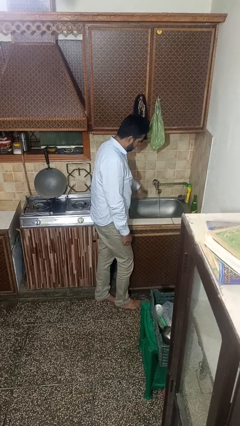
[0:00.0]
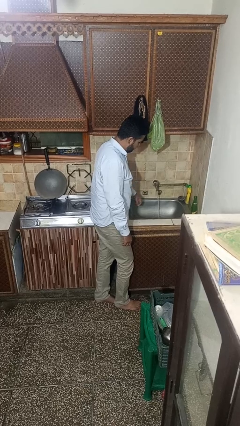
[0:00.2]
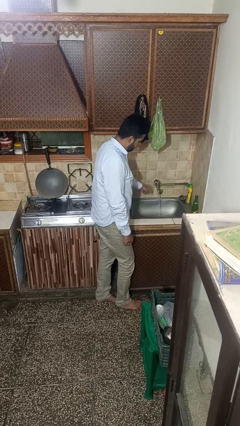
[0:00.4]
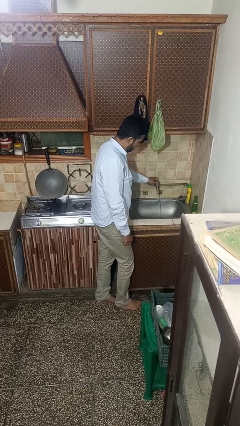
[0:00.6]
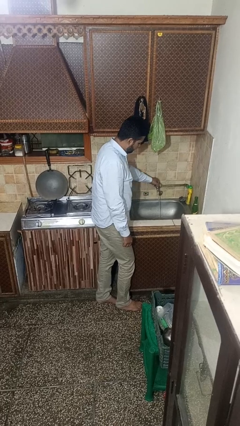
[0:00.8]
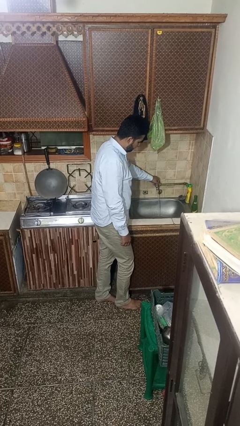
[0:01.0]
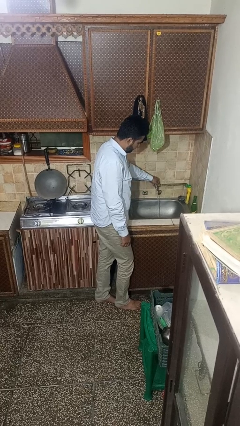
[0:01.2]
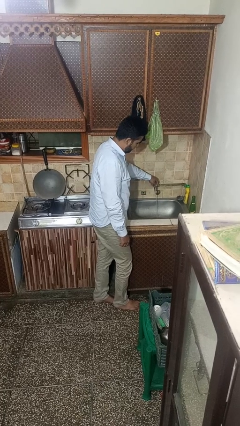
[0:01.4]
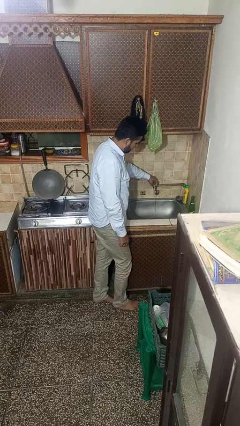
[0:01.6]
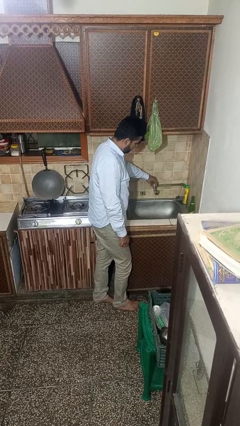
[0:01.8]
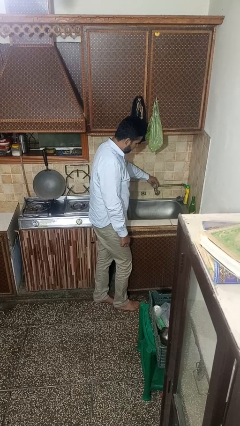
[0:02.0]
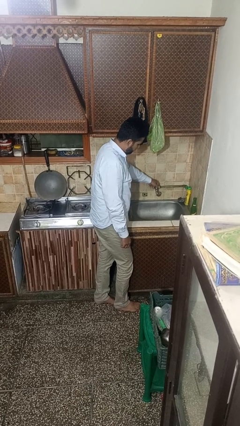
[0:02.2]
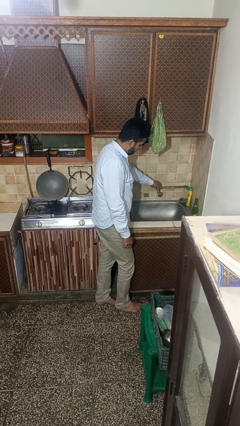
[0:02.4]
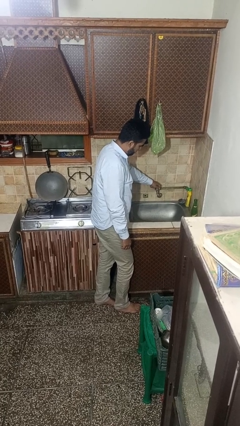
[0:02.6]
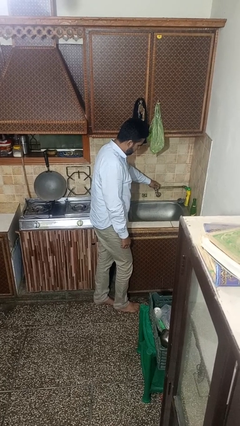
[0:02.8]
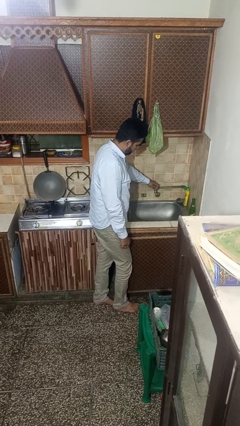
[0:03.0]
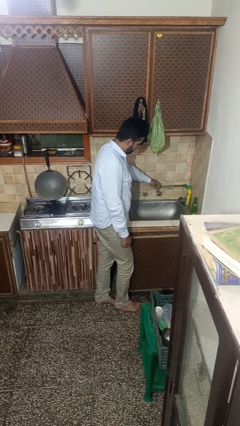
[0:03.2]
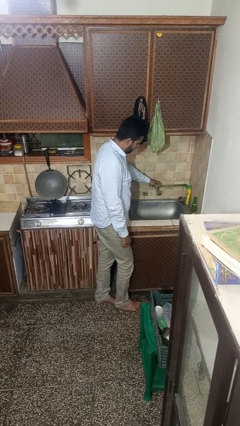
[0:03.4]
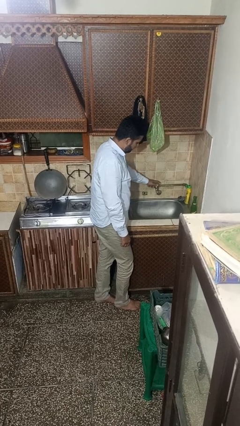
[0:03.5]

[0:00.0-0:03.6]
person turns off faucet

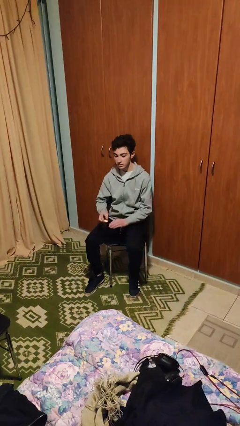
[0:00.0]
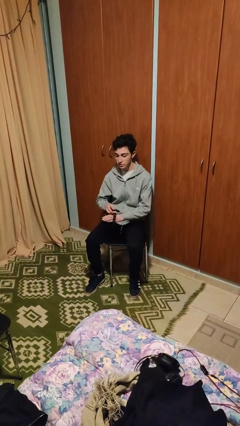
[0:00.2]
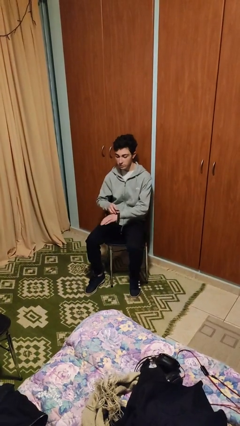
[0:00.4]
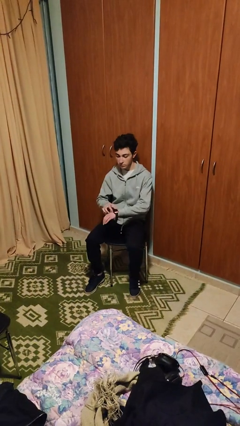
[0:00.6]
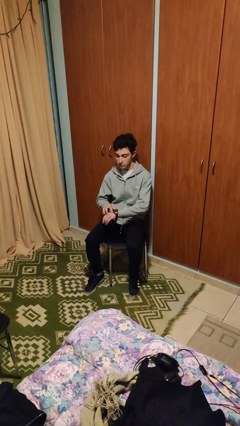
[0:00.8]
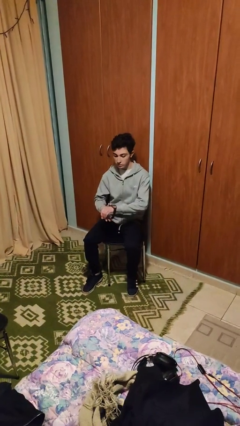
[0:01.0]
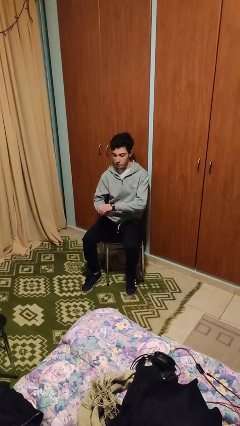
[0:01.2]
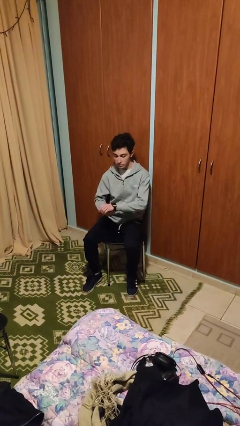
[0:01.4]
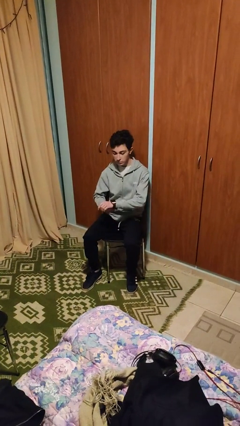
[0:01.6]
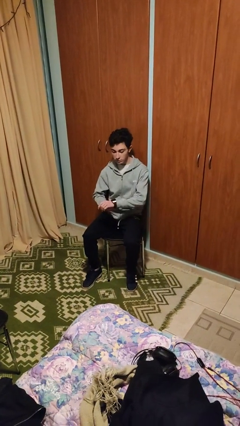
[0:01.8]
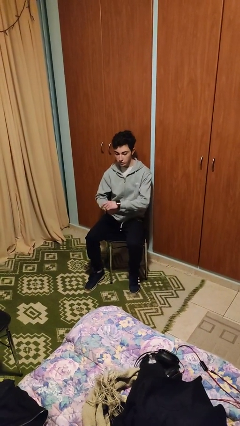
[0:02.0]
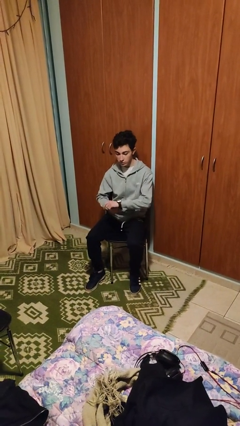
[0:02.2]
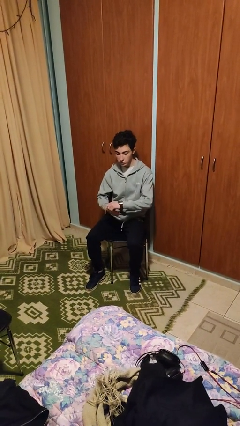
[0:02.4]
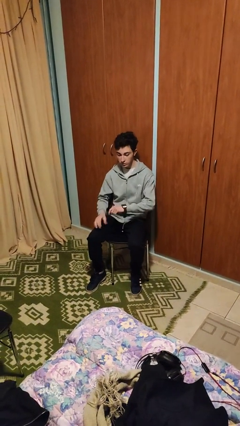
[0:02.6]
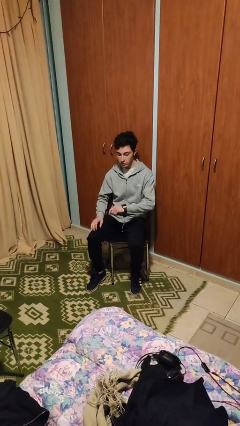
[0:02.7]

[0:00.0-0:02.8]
person puts on wristwatch

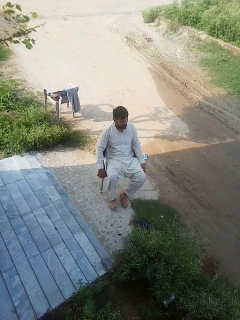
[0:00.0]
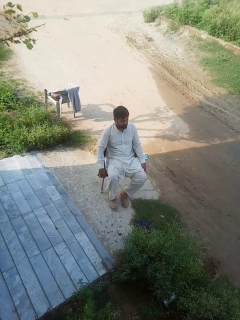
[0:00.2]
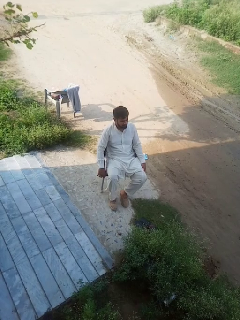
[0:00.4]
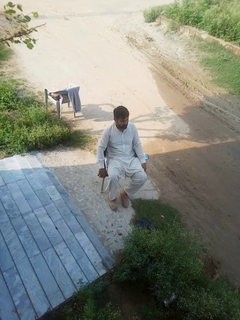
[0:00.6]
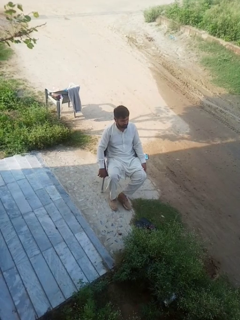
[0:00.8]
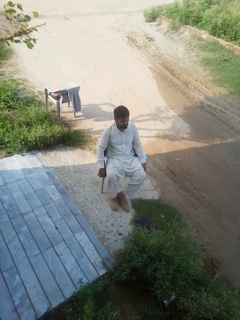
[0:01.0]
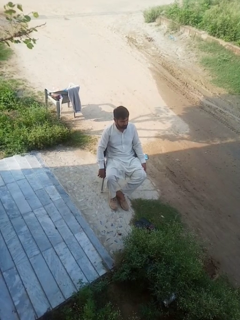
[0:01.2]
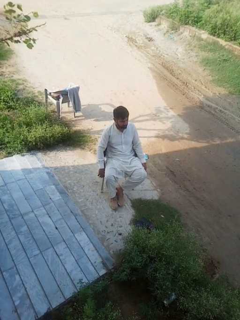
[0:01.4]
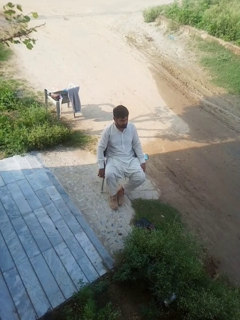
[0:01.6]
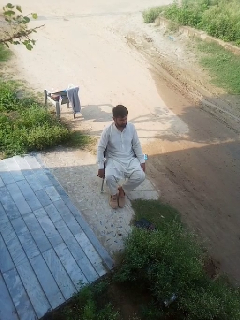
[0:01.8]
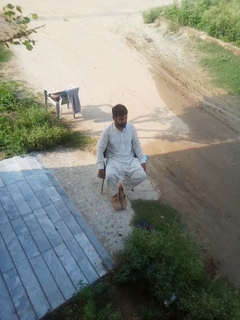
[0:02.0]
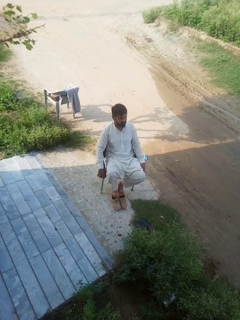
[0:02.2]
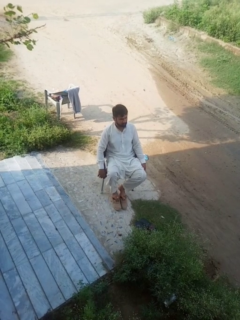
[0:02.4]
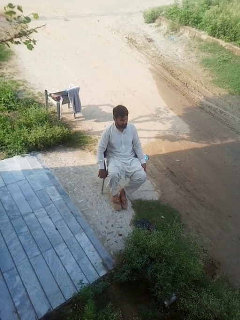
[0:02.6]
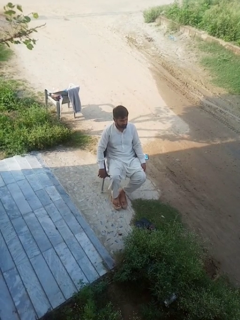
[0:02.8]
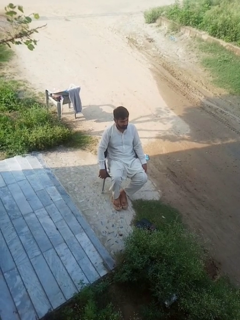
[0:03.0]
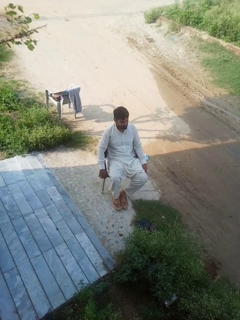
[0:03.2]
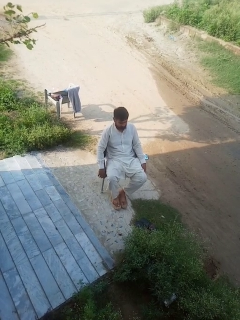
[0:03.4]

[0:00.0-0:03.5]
person takes off shoes

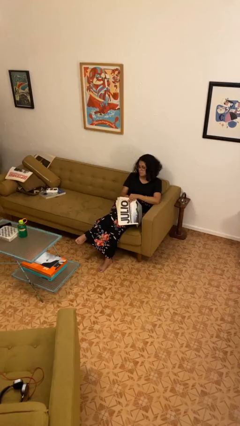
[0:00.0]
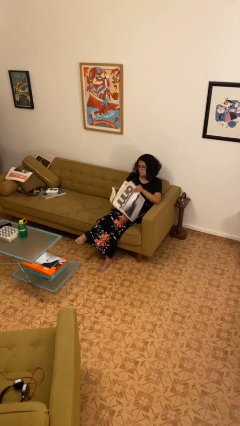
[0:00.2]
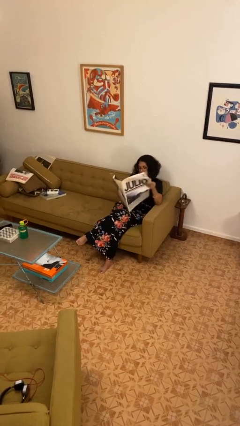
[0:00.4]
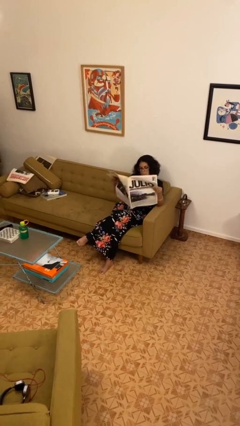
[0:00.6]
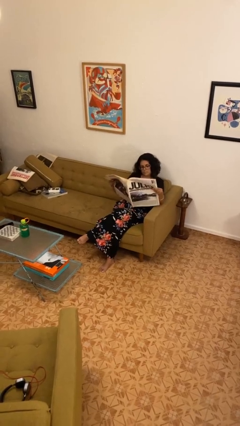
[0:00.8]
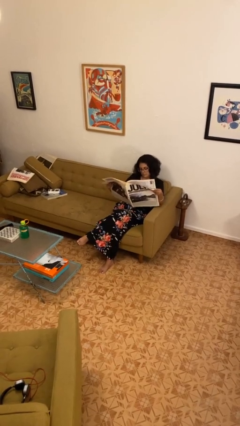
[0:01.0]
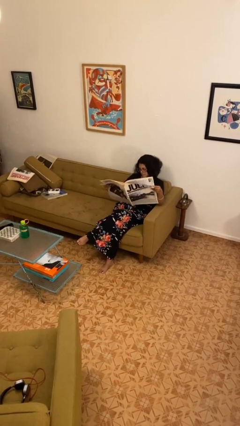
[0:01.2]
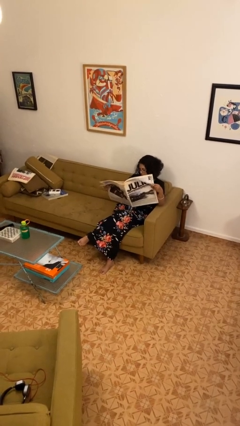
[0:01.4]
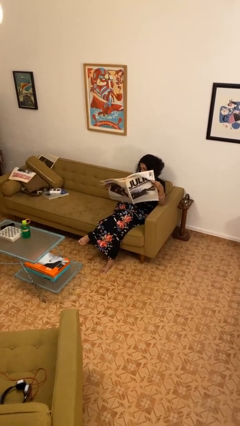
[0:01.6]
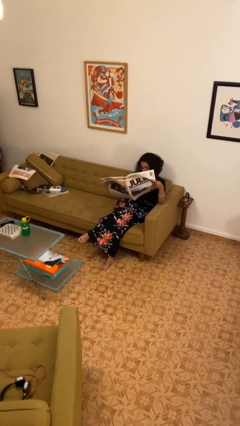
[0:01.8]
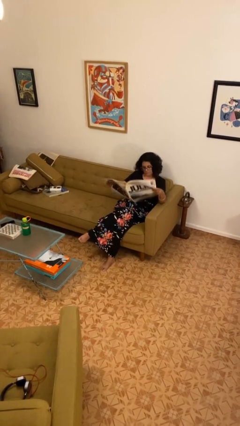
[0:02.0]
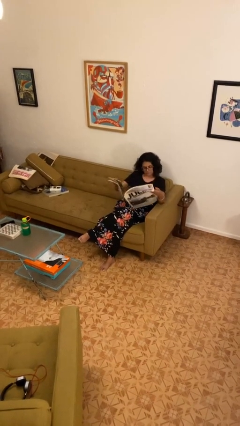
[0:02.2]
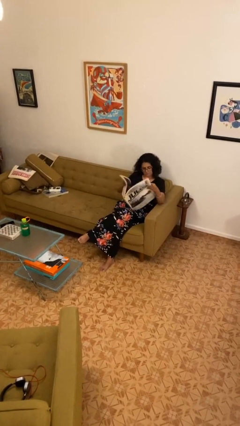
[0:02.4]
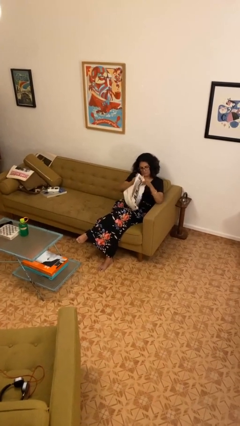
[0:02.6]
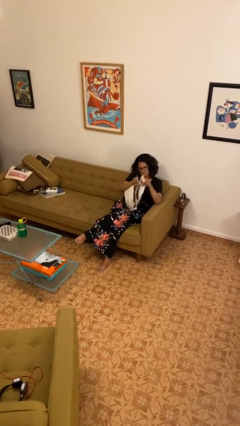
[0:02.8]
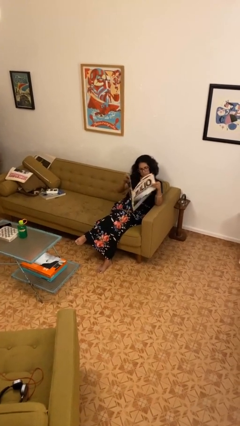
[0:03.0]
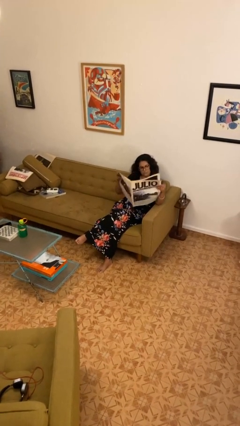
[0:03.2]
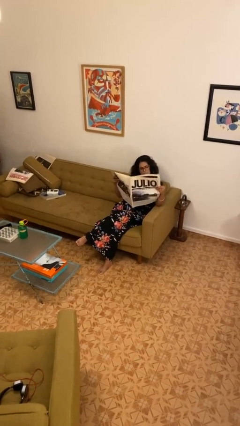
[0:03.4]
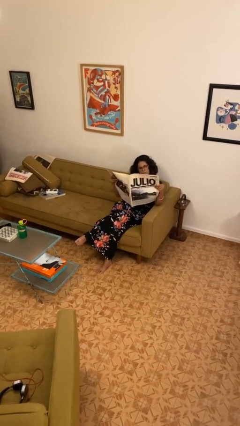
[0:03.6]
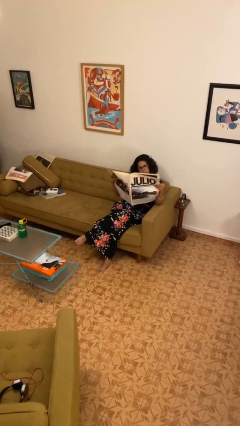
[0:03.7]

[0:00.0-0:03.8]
person reads newspaper

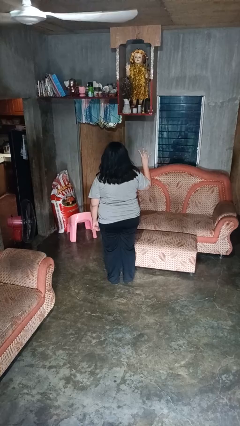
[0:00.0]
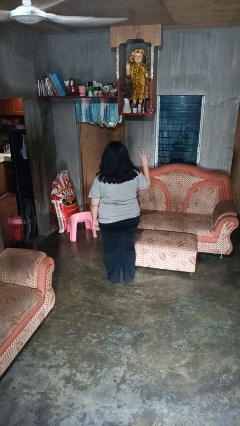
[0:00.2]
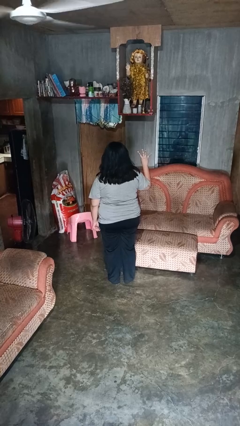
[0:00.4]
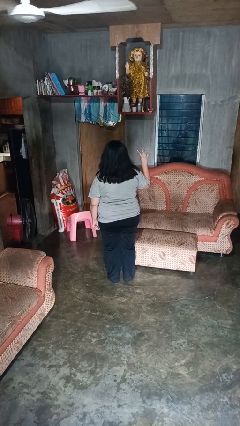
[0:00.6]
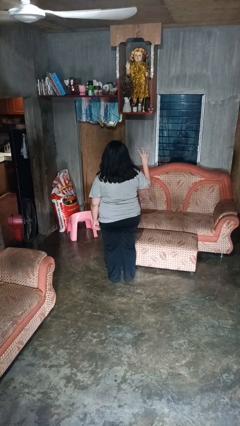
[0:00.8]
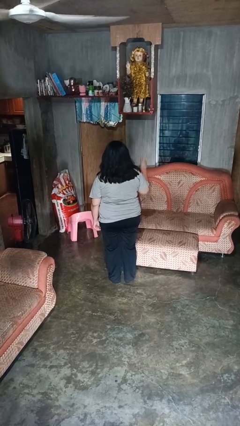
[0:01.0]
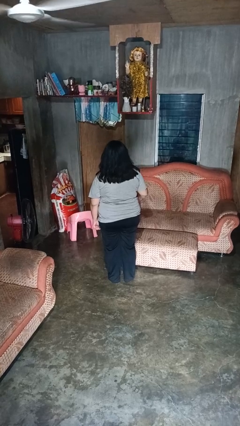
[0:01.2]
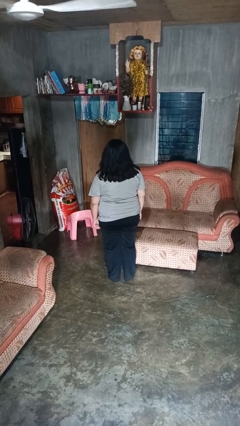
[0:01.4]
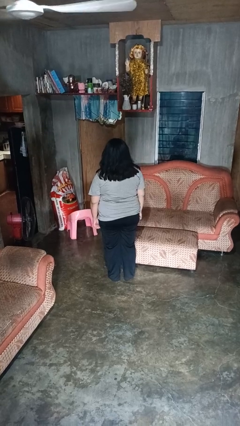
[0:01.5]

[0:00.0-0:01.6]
person gestures number four

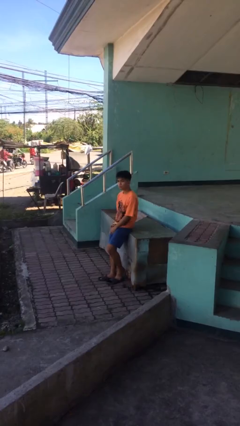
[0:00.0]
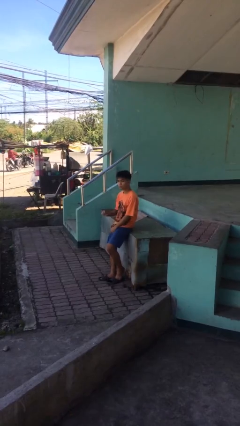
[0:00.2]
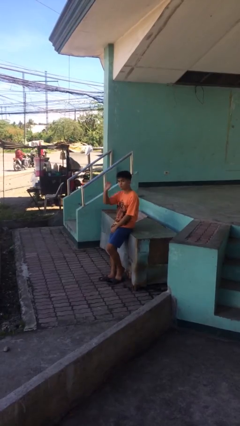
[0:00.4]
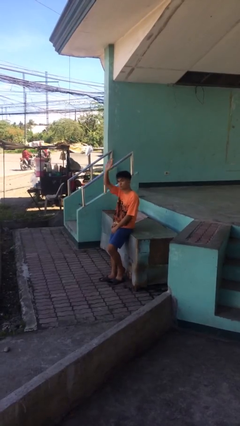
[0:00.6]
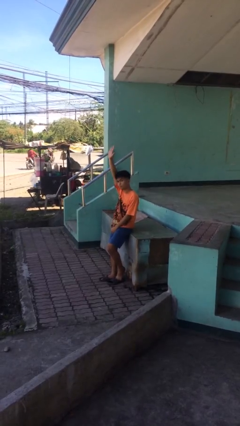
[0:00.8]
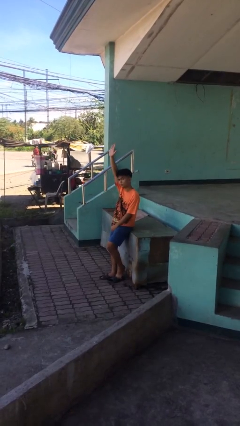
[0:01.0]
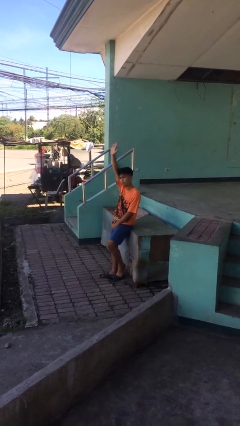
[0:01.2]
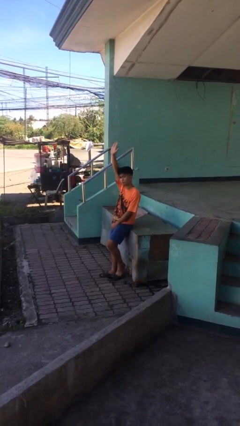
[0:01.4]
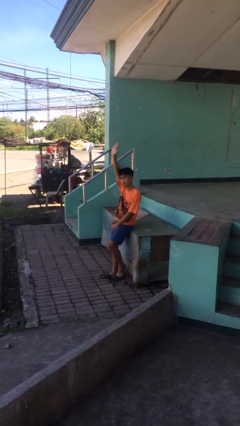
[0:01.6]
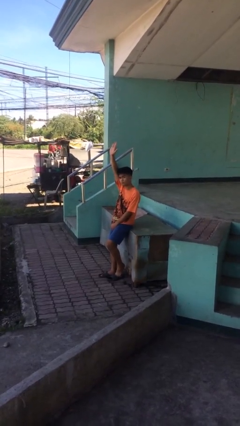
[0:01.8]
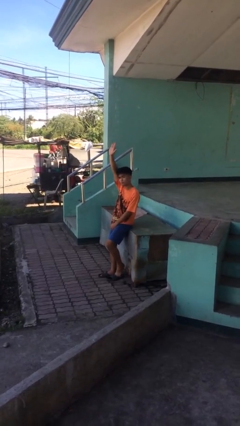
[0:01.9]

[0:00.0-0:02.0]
person gestures raise hand

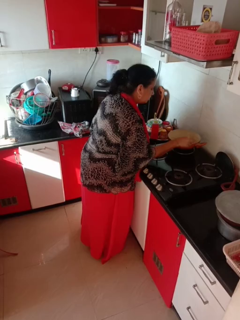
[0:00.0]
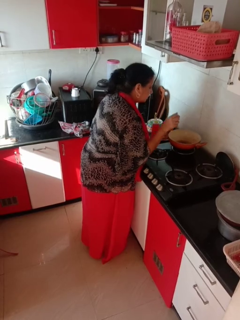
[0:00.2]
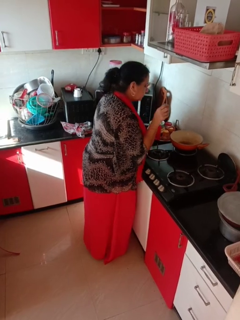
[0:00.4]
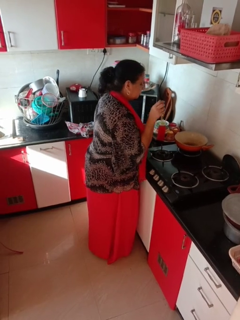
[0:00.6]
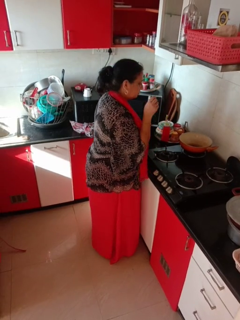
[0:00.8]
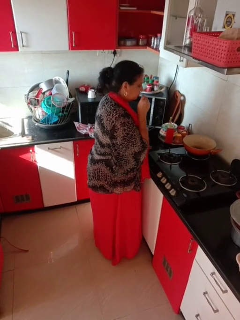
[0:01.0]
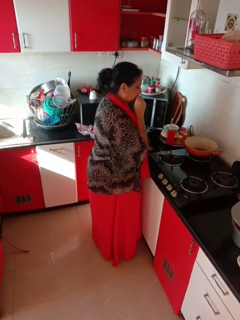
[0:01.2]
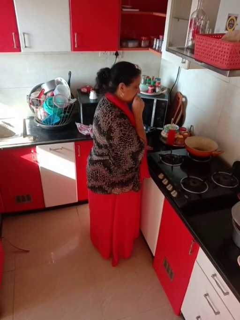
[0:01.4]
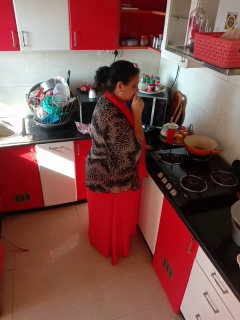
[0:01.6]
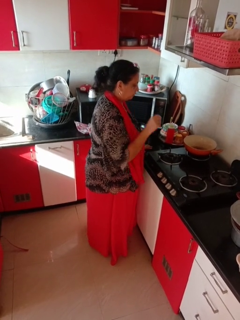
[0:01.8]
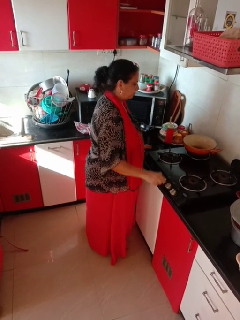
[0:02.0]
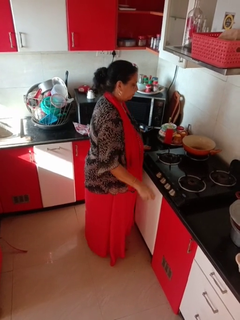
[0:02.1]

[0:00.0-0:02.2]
person burns hand
